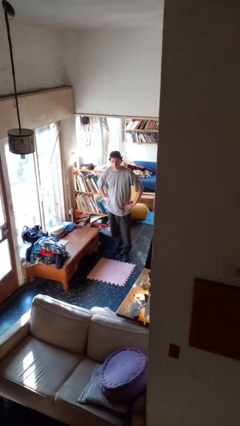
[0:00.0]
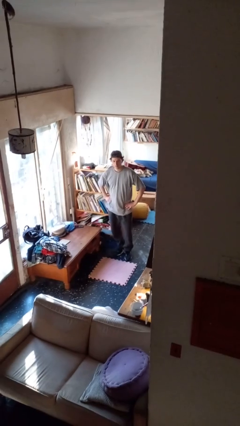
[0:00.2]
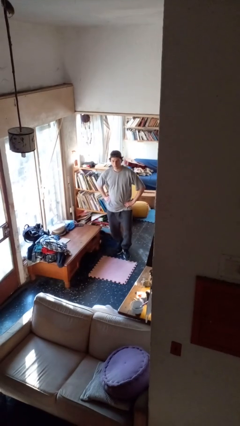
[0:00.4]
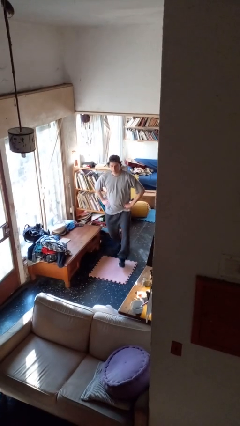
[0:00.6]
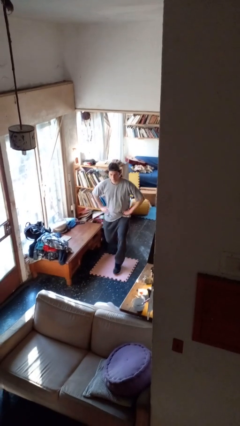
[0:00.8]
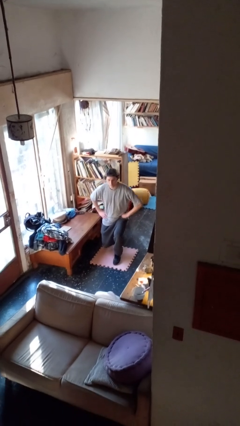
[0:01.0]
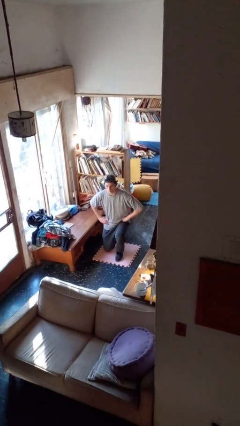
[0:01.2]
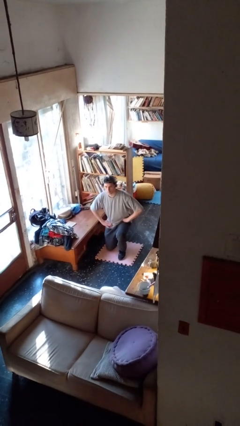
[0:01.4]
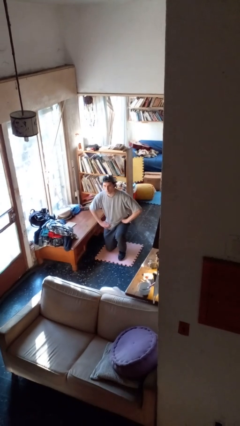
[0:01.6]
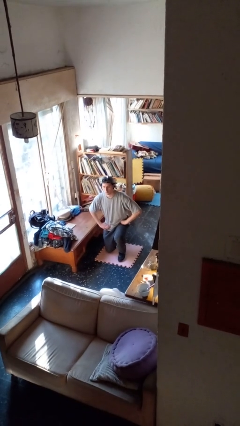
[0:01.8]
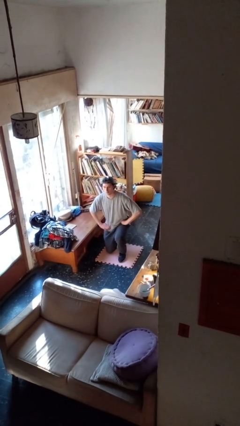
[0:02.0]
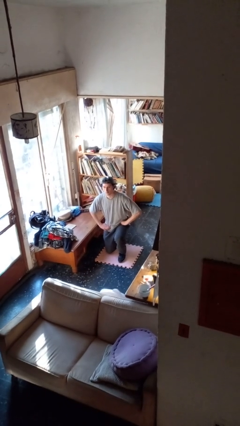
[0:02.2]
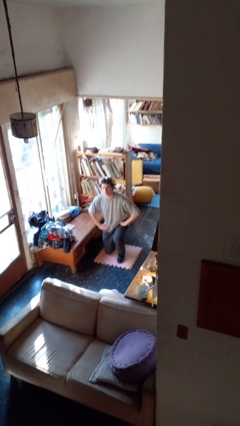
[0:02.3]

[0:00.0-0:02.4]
person kneels

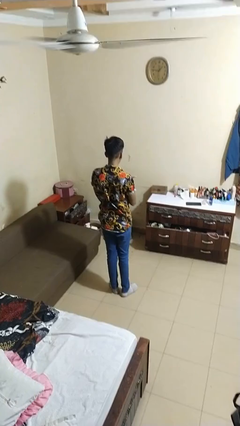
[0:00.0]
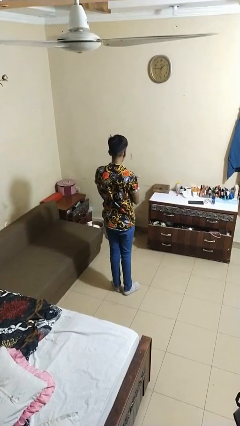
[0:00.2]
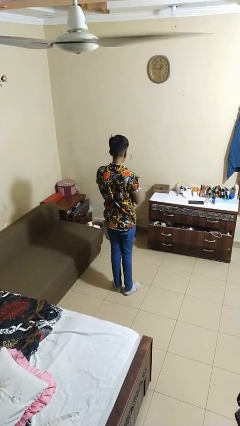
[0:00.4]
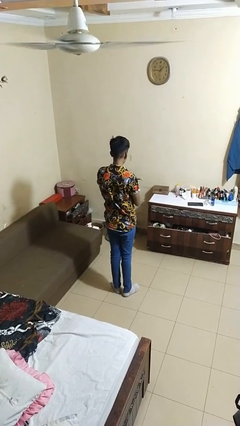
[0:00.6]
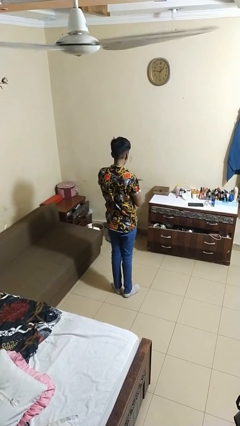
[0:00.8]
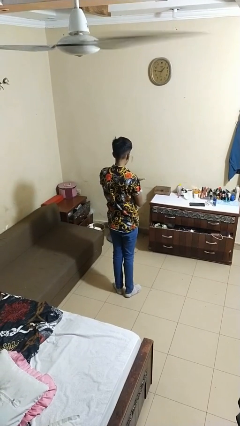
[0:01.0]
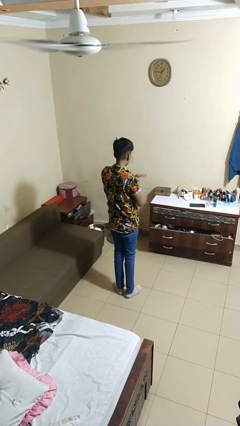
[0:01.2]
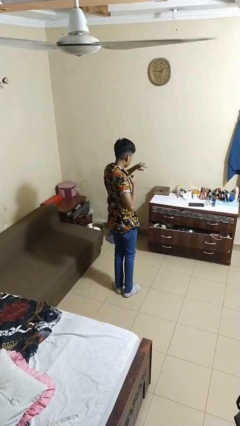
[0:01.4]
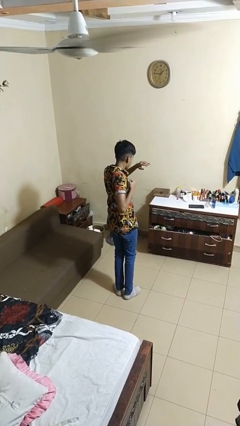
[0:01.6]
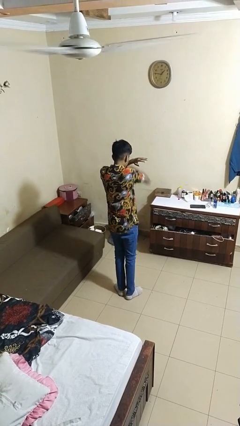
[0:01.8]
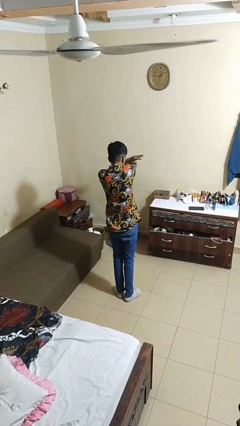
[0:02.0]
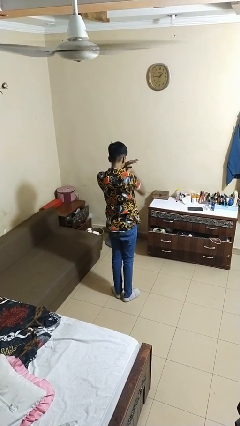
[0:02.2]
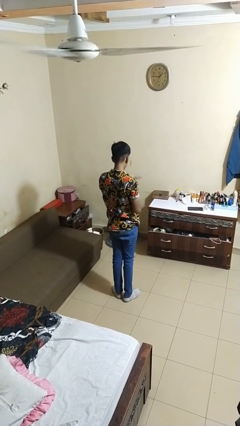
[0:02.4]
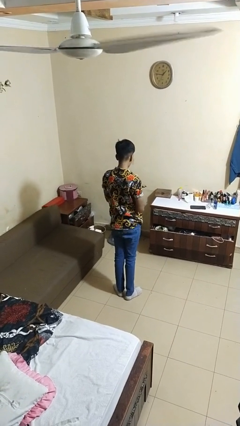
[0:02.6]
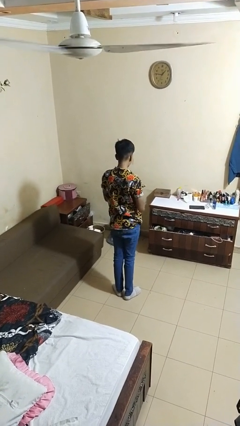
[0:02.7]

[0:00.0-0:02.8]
person karate chop

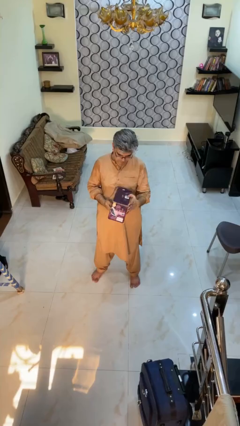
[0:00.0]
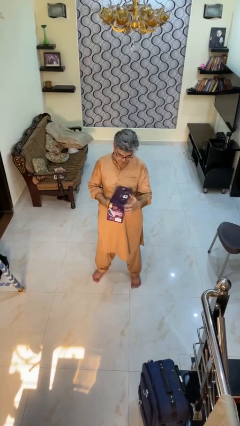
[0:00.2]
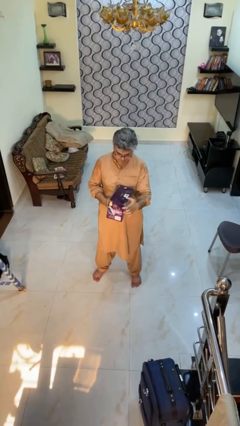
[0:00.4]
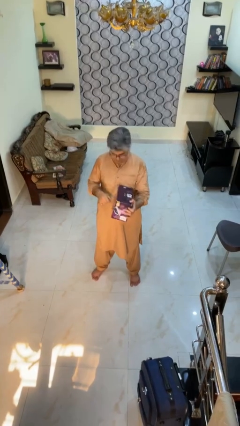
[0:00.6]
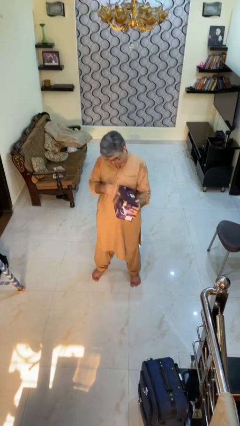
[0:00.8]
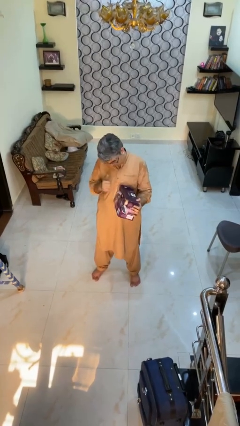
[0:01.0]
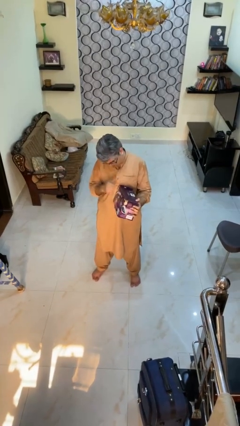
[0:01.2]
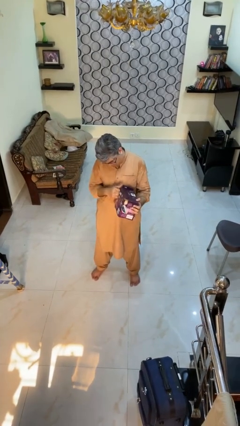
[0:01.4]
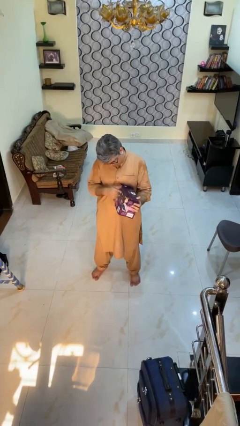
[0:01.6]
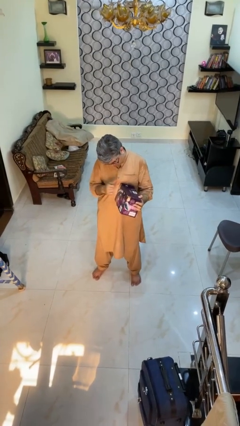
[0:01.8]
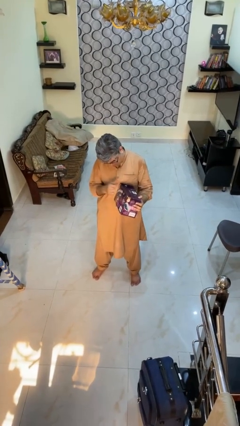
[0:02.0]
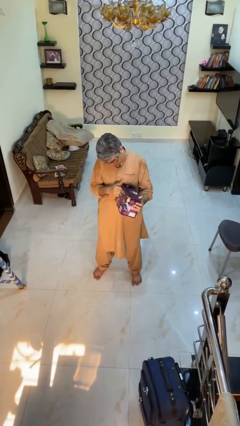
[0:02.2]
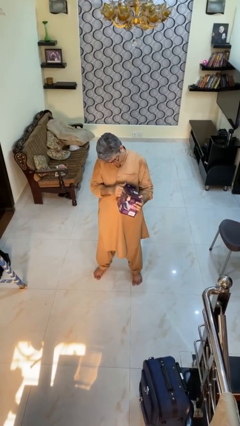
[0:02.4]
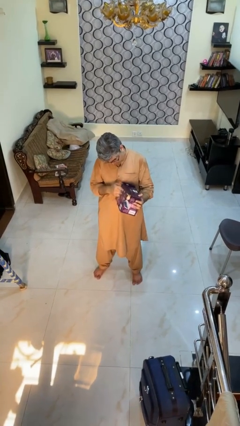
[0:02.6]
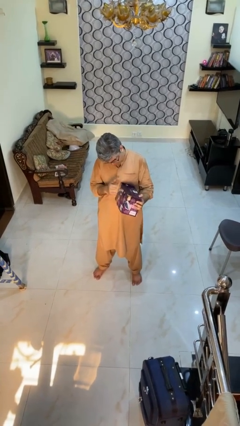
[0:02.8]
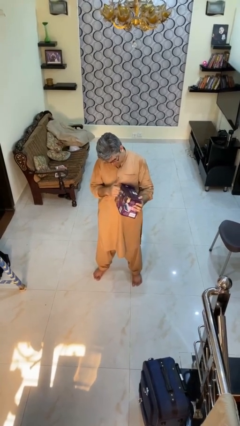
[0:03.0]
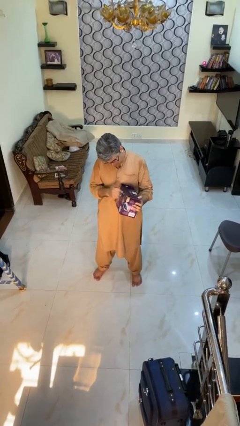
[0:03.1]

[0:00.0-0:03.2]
person taps object with finger

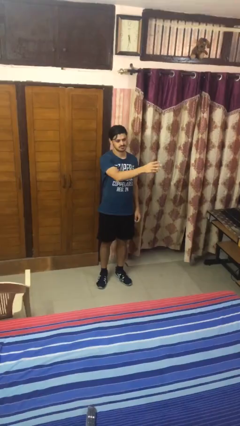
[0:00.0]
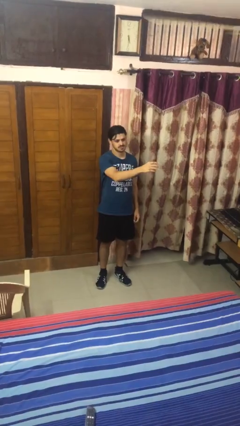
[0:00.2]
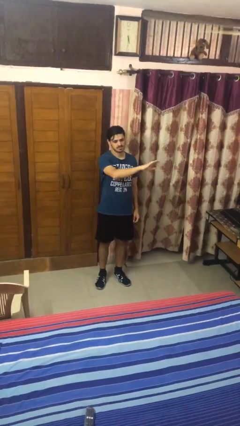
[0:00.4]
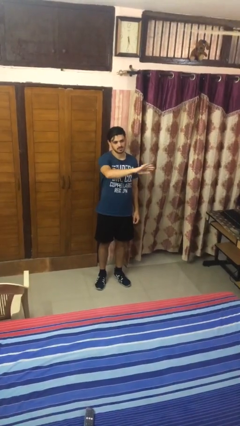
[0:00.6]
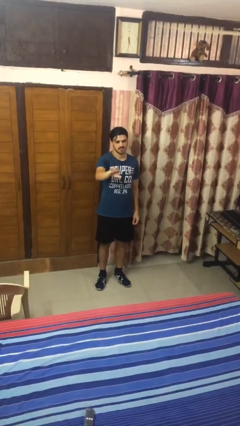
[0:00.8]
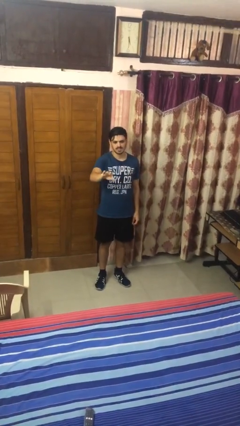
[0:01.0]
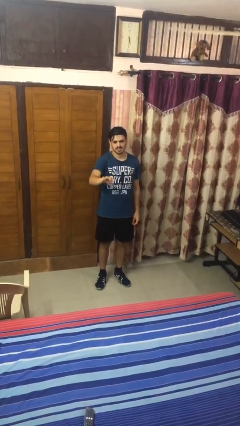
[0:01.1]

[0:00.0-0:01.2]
person gestures swipe right

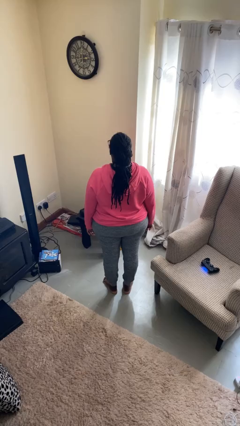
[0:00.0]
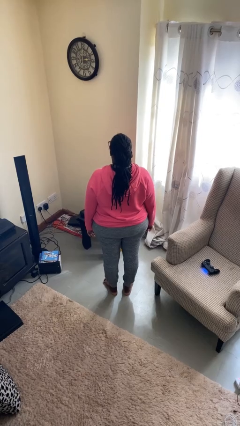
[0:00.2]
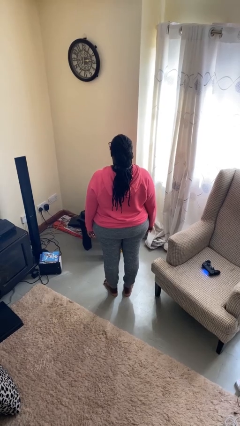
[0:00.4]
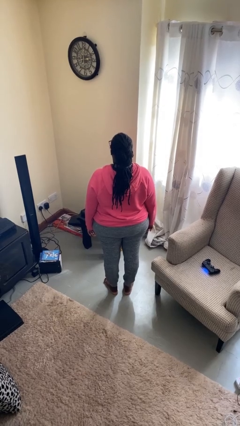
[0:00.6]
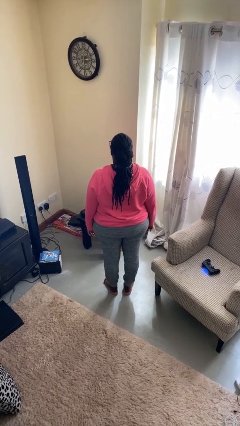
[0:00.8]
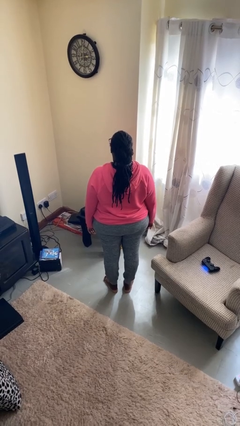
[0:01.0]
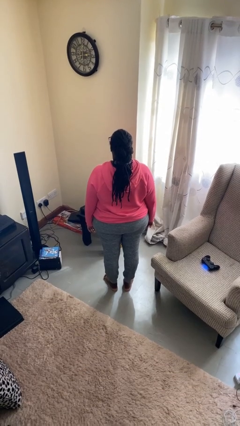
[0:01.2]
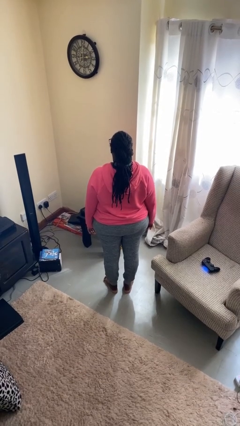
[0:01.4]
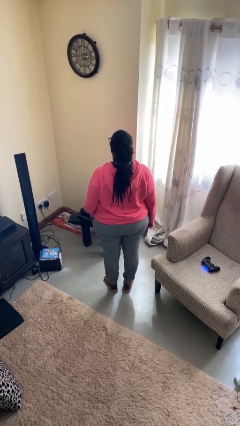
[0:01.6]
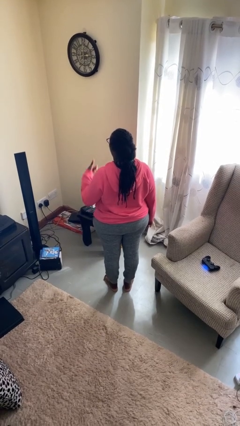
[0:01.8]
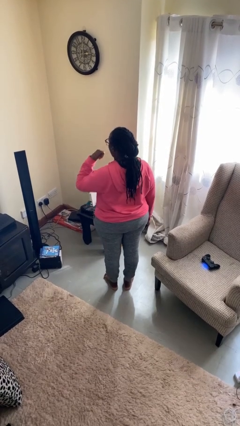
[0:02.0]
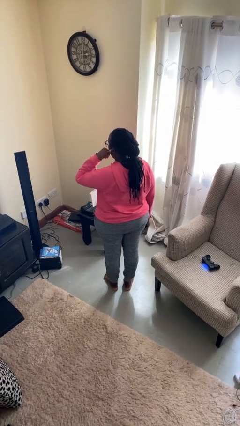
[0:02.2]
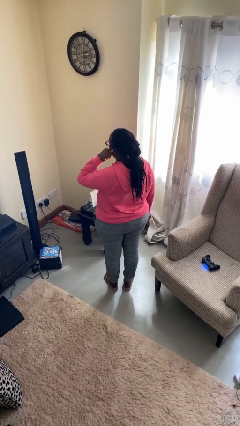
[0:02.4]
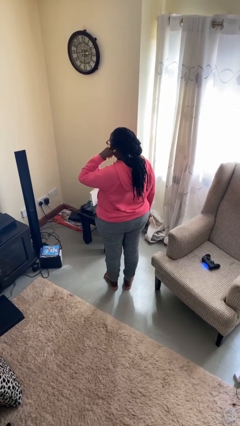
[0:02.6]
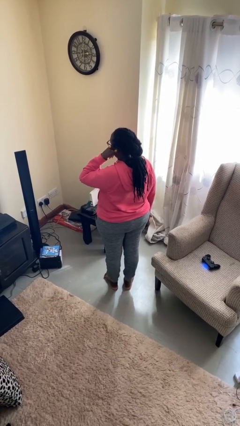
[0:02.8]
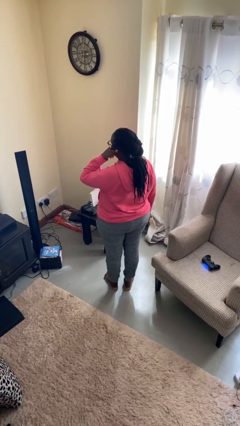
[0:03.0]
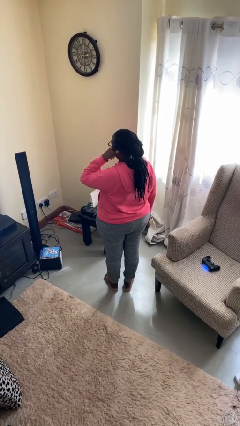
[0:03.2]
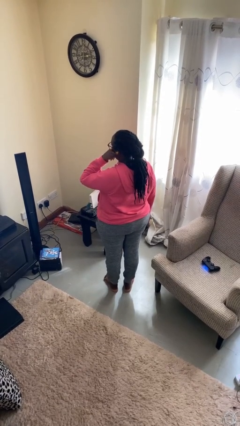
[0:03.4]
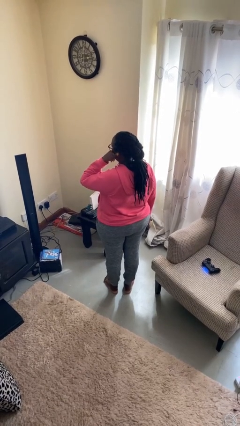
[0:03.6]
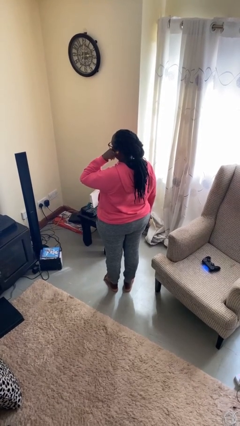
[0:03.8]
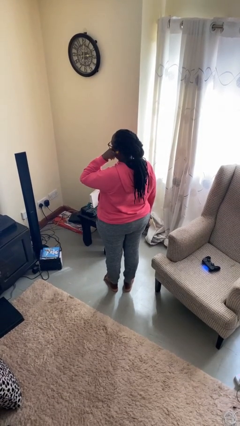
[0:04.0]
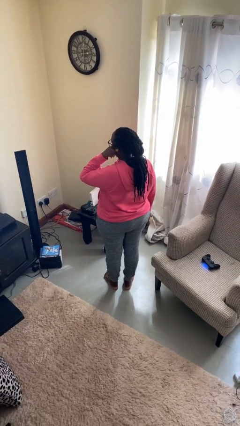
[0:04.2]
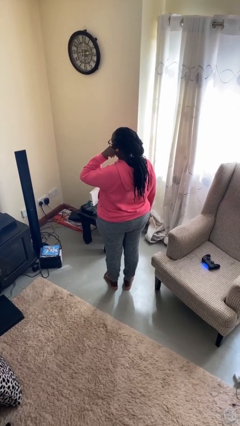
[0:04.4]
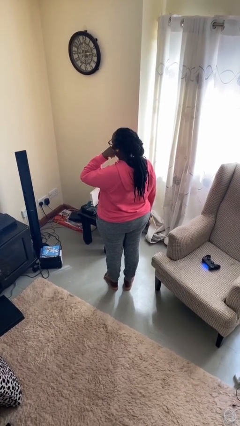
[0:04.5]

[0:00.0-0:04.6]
person gestures call me

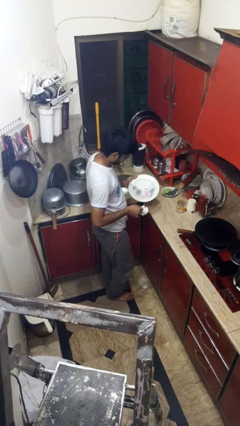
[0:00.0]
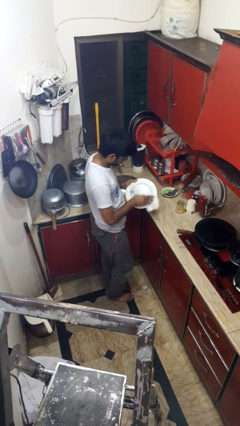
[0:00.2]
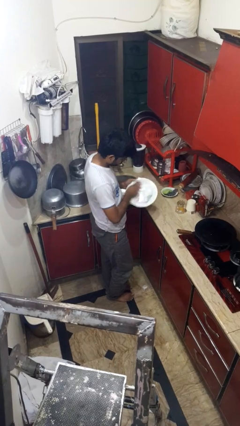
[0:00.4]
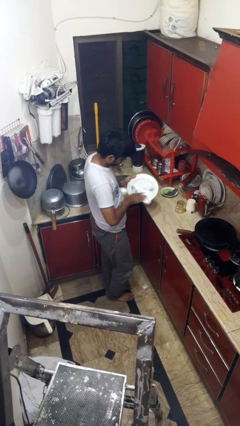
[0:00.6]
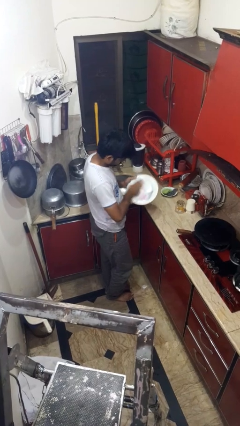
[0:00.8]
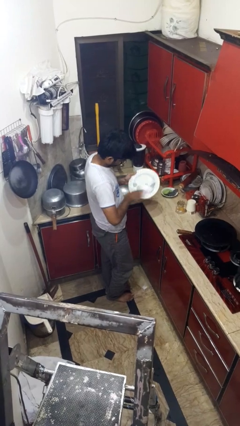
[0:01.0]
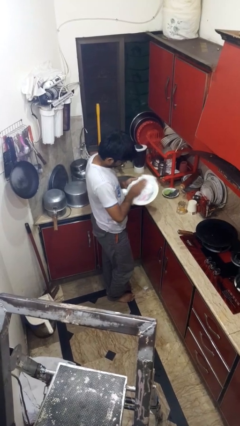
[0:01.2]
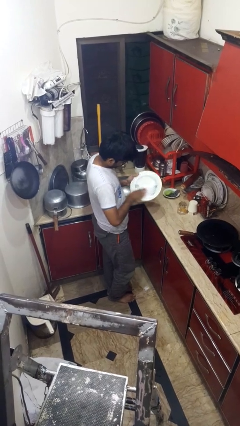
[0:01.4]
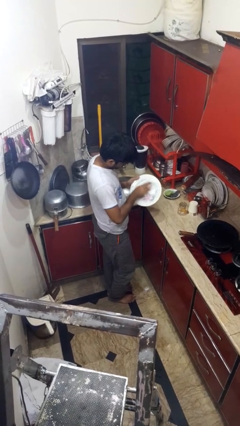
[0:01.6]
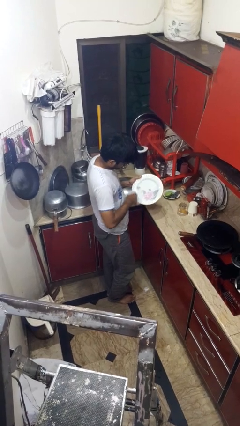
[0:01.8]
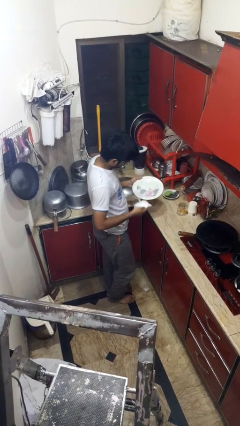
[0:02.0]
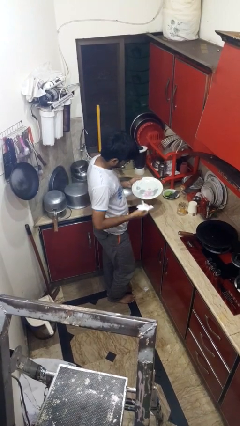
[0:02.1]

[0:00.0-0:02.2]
person dries dish

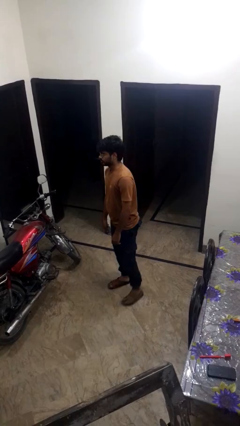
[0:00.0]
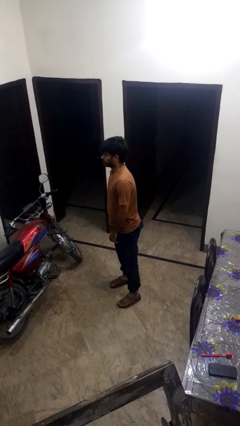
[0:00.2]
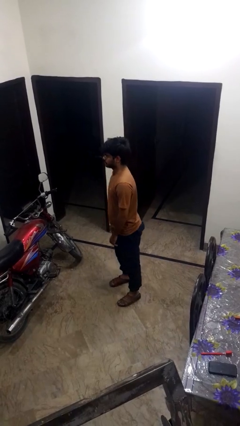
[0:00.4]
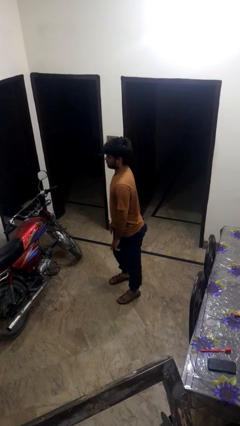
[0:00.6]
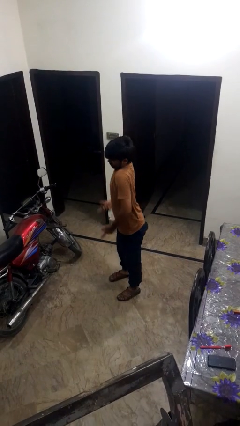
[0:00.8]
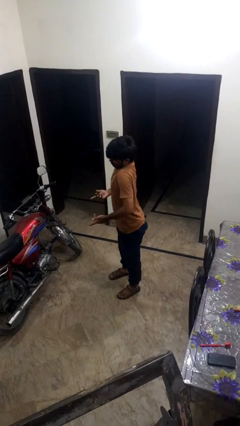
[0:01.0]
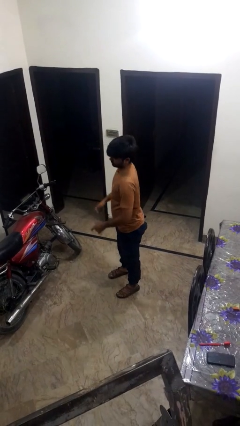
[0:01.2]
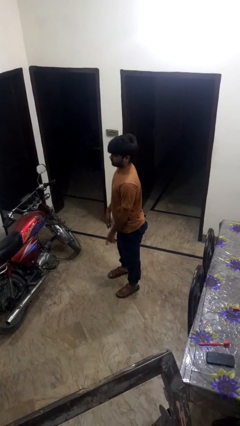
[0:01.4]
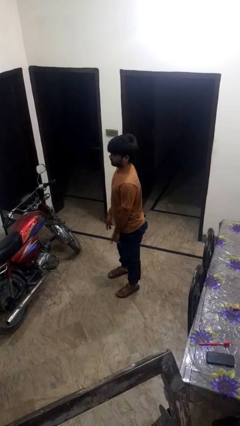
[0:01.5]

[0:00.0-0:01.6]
person shrugs
